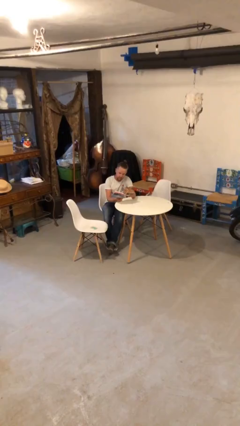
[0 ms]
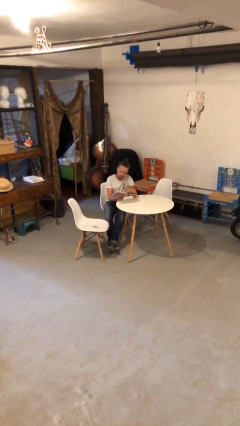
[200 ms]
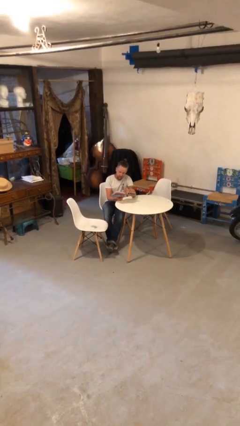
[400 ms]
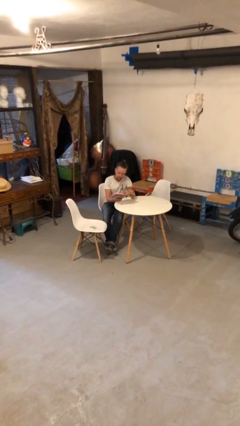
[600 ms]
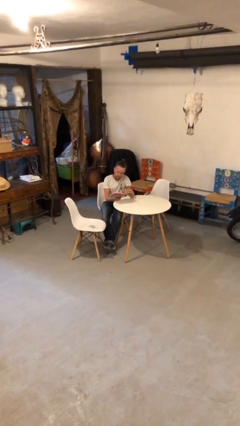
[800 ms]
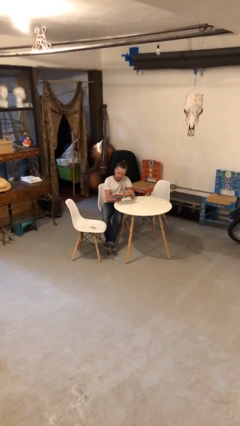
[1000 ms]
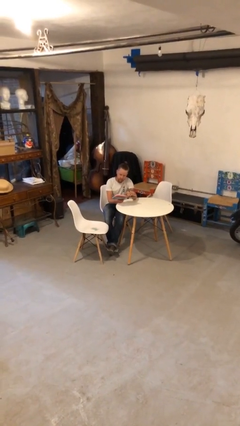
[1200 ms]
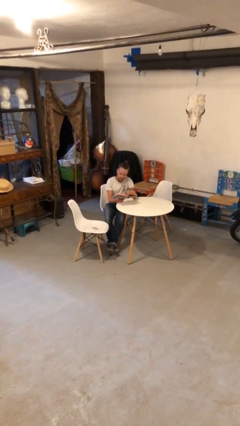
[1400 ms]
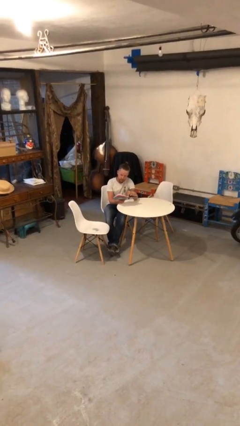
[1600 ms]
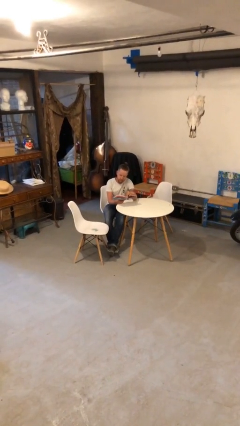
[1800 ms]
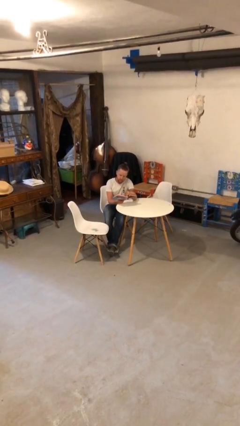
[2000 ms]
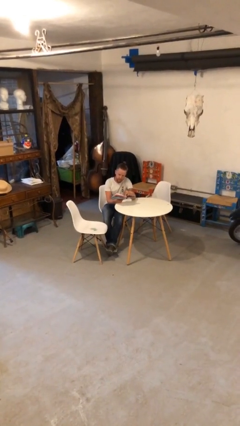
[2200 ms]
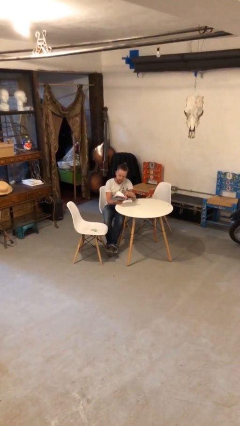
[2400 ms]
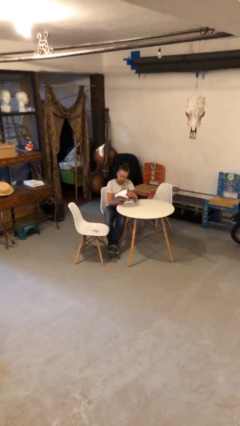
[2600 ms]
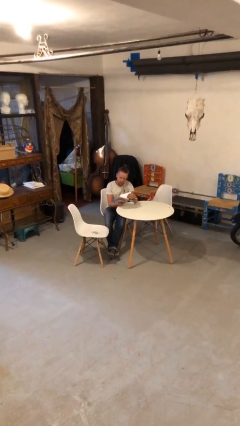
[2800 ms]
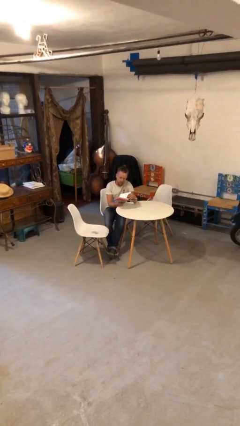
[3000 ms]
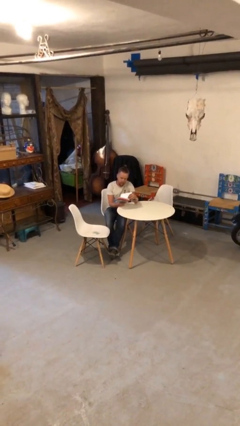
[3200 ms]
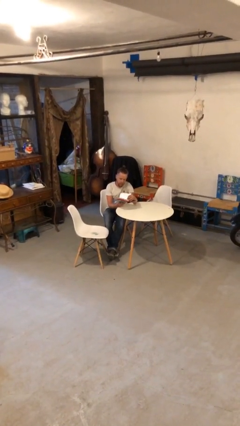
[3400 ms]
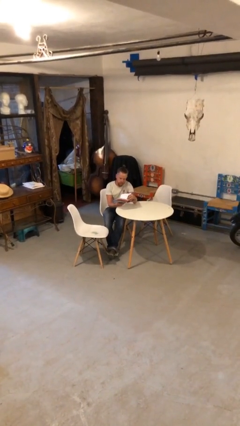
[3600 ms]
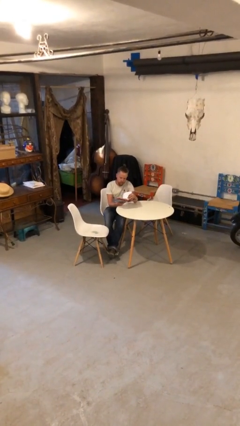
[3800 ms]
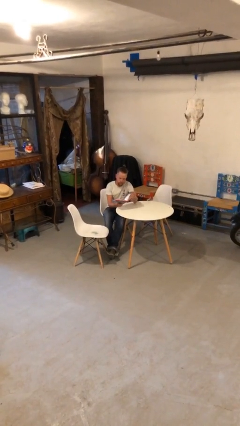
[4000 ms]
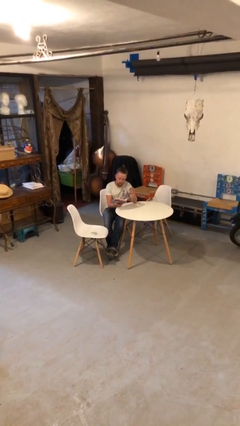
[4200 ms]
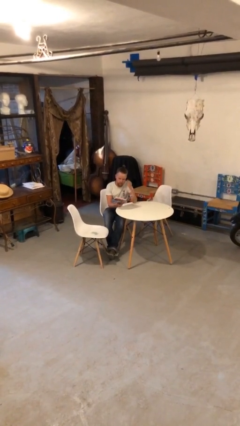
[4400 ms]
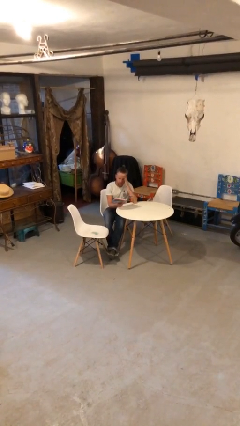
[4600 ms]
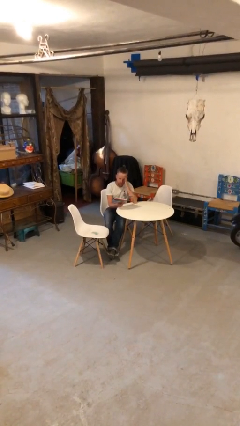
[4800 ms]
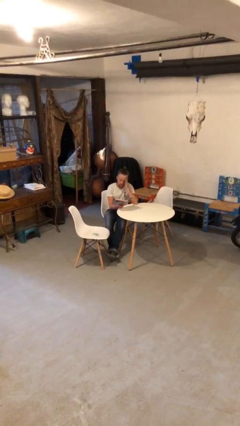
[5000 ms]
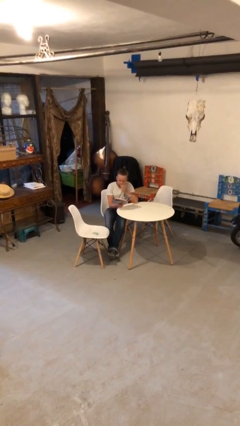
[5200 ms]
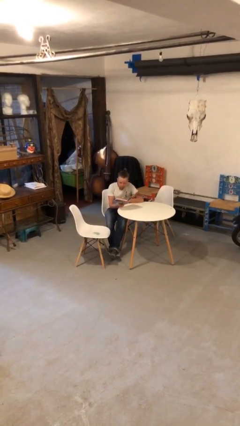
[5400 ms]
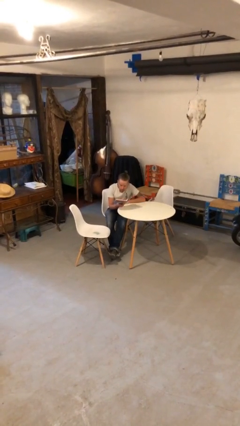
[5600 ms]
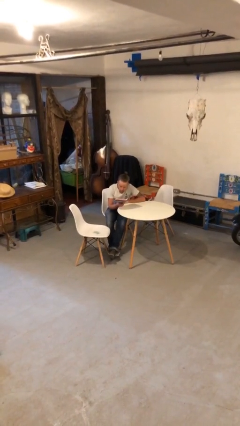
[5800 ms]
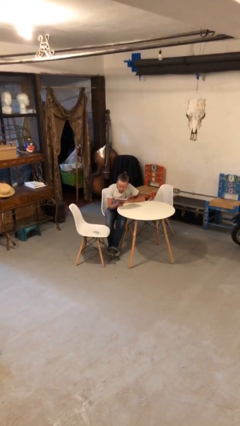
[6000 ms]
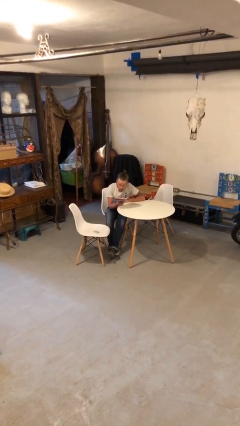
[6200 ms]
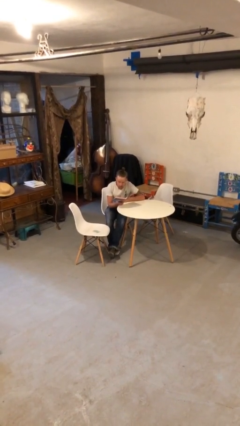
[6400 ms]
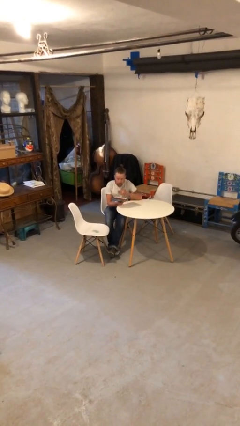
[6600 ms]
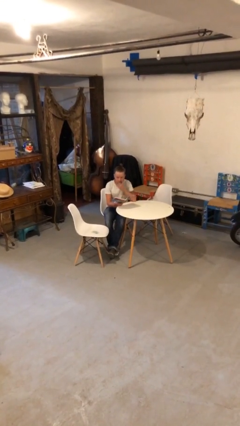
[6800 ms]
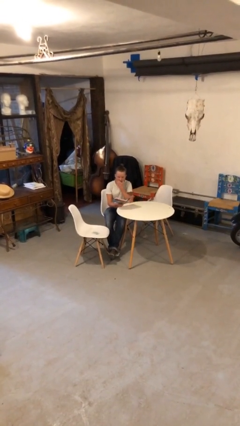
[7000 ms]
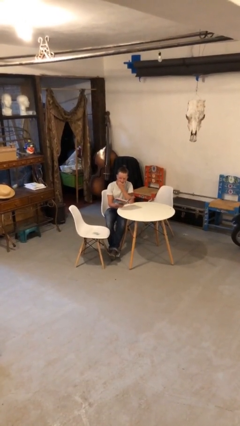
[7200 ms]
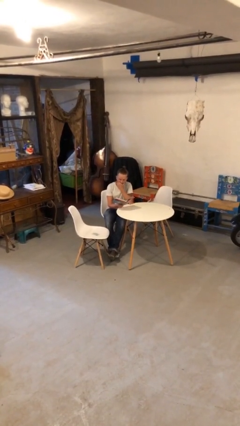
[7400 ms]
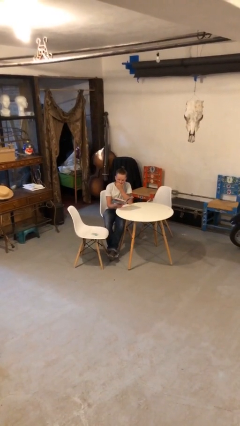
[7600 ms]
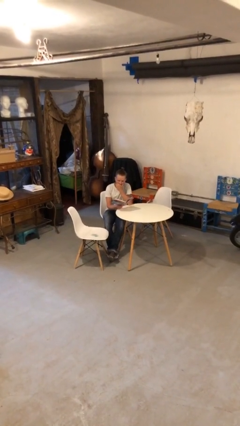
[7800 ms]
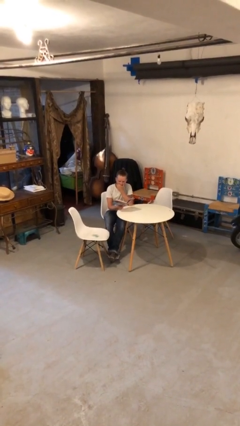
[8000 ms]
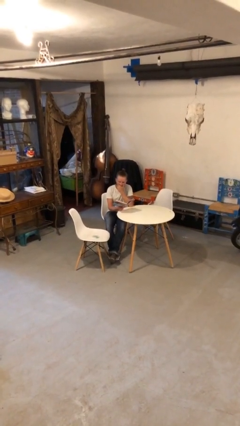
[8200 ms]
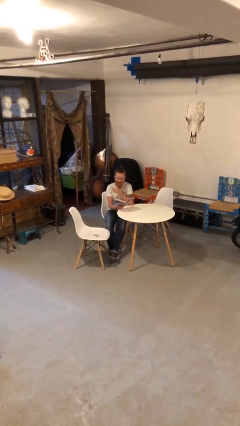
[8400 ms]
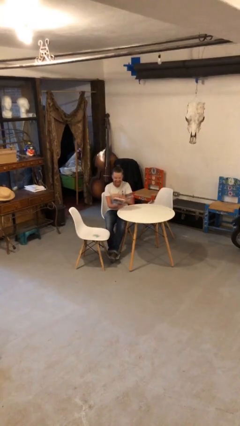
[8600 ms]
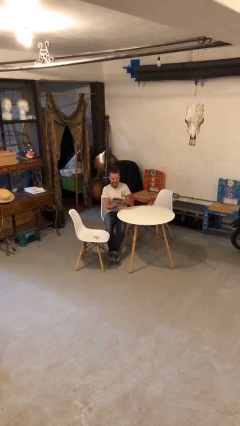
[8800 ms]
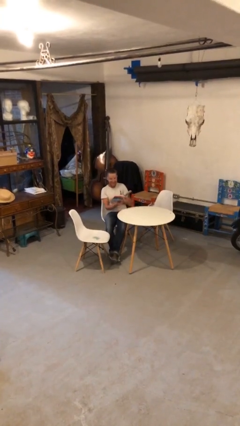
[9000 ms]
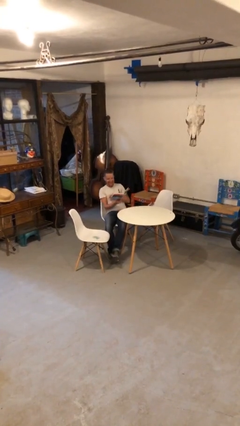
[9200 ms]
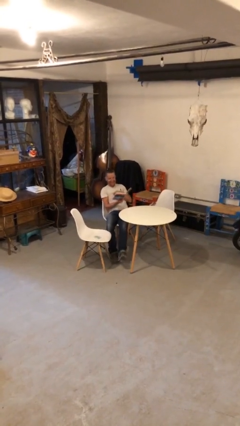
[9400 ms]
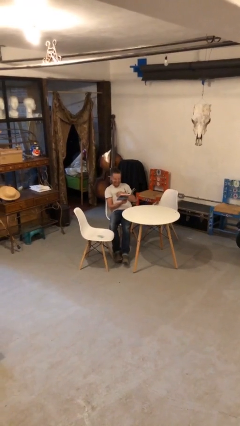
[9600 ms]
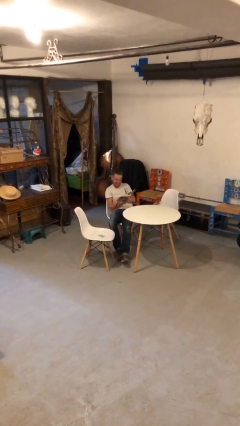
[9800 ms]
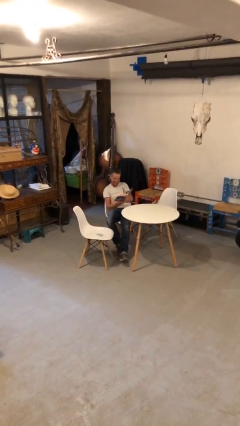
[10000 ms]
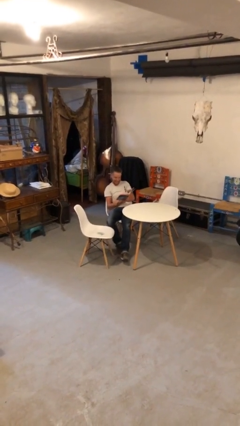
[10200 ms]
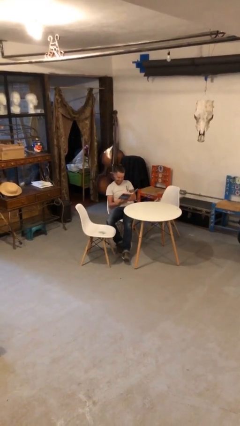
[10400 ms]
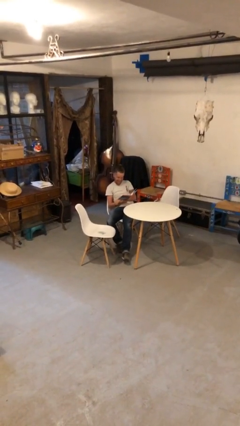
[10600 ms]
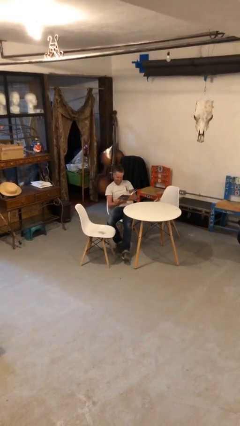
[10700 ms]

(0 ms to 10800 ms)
person reads document

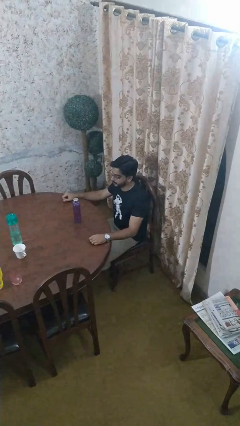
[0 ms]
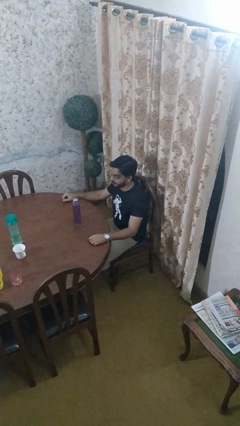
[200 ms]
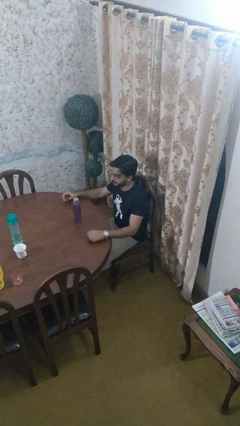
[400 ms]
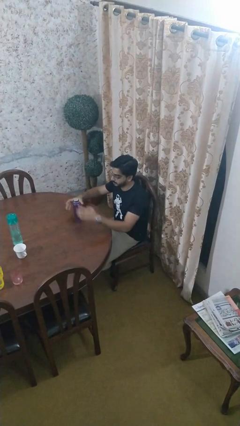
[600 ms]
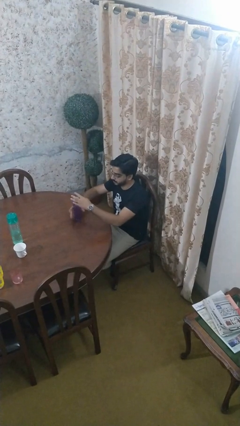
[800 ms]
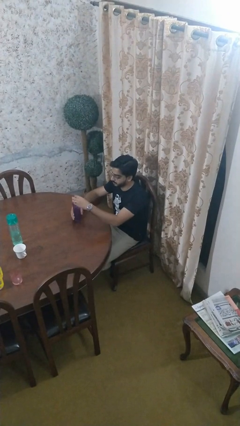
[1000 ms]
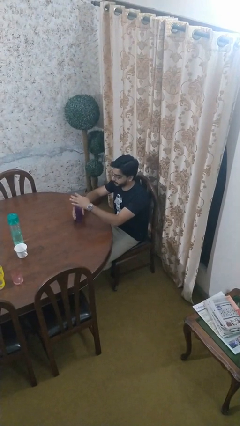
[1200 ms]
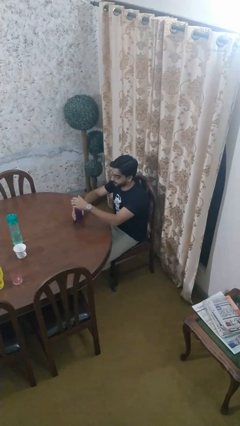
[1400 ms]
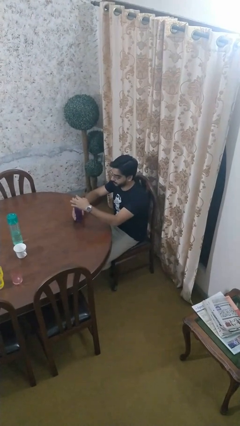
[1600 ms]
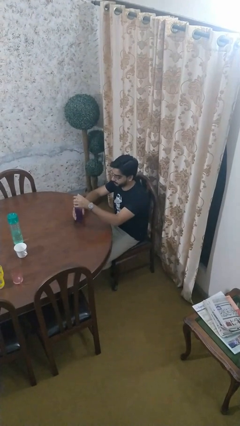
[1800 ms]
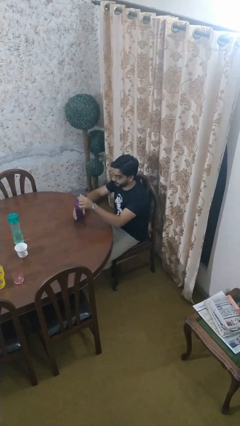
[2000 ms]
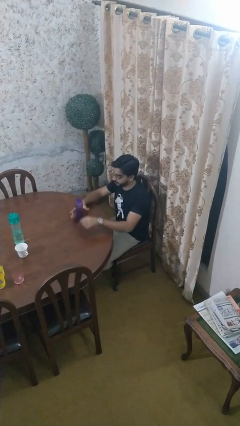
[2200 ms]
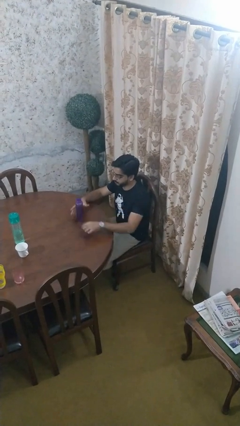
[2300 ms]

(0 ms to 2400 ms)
person unscrews lid from bottle

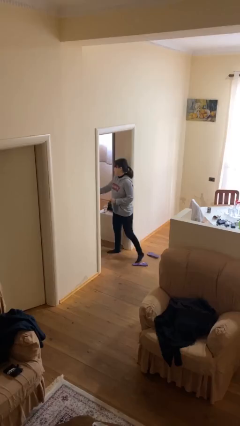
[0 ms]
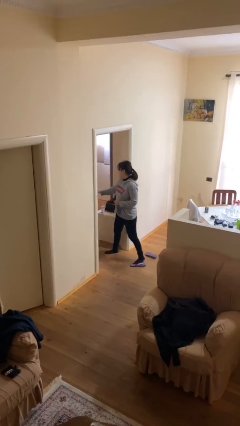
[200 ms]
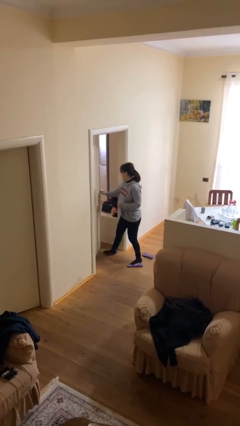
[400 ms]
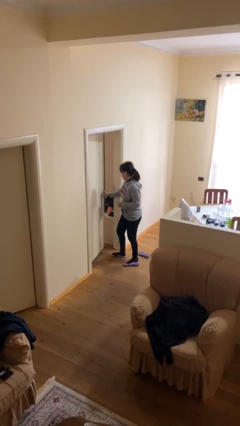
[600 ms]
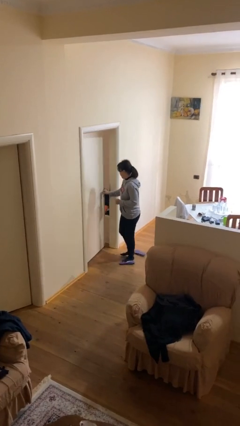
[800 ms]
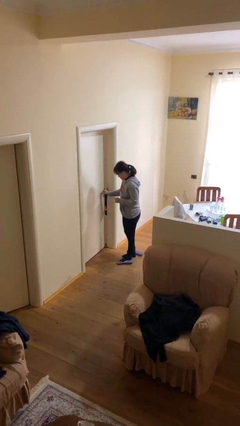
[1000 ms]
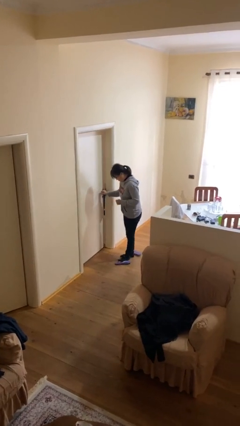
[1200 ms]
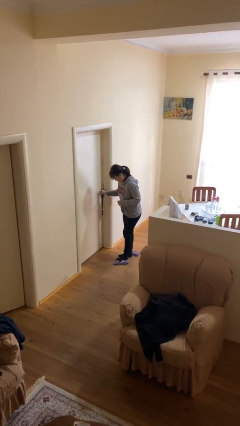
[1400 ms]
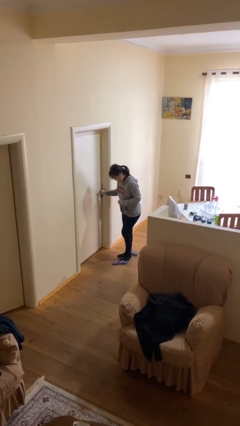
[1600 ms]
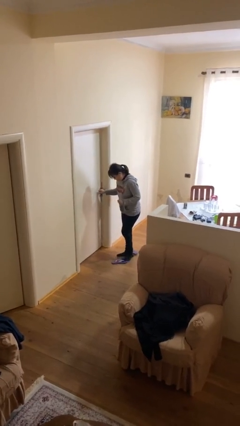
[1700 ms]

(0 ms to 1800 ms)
person closes facility door

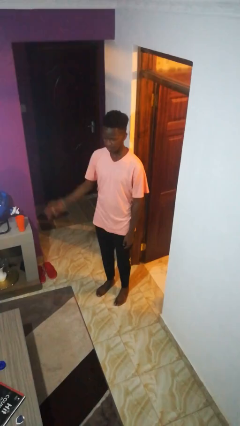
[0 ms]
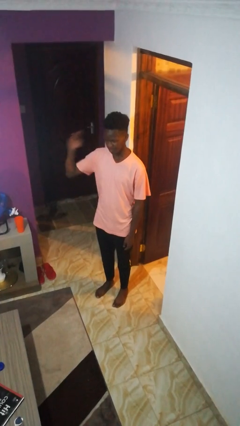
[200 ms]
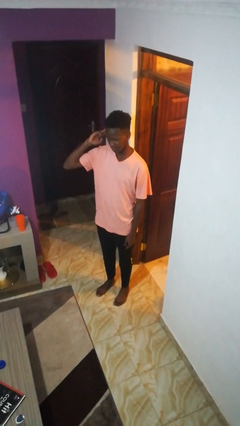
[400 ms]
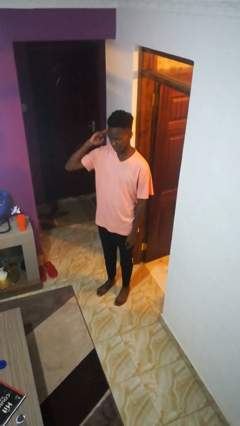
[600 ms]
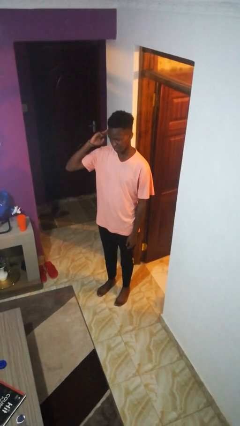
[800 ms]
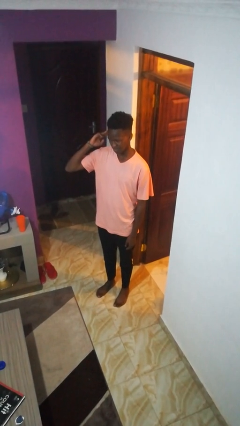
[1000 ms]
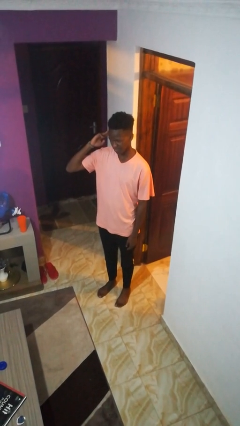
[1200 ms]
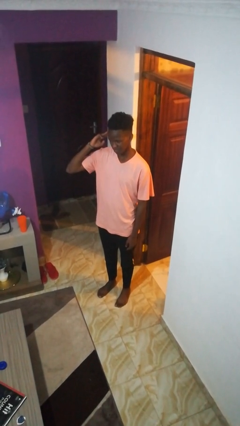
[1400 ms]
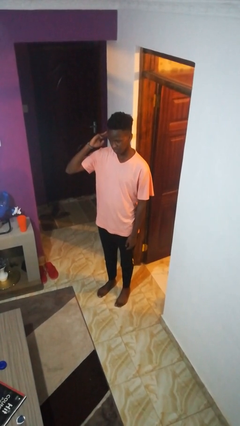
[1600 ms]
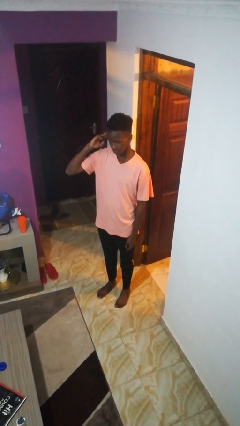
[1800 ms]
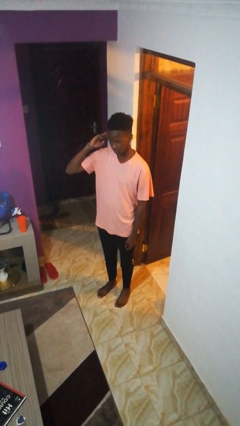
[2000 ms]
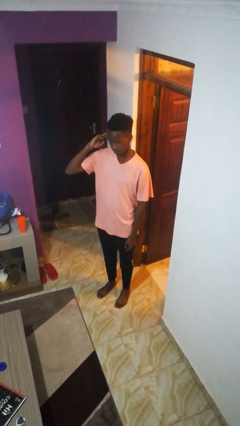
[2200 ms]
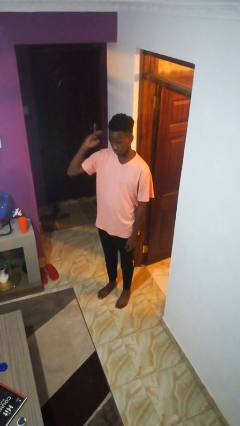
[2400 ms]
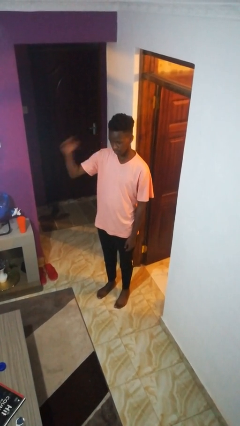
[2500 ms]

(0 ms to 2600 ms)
person salutes
